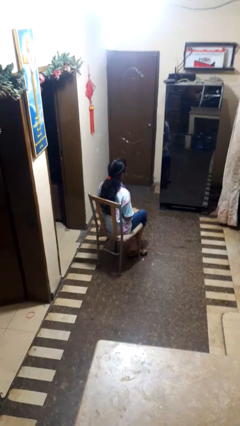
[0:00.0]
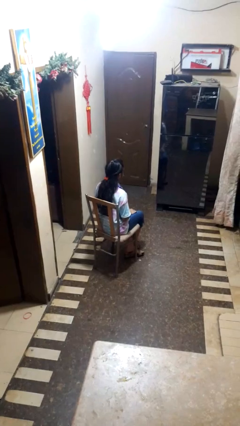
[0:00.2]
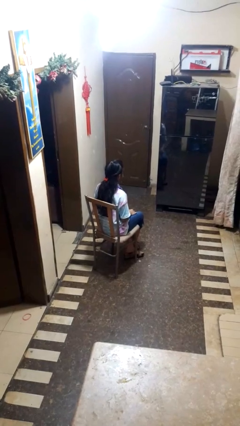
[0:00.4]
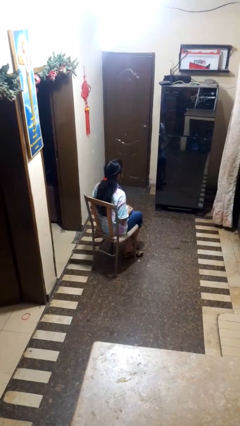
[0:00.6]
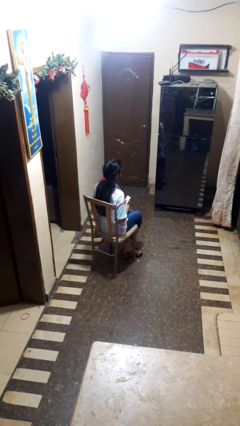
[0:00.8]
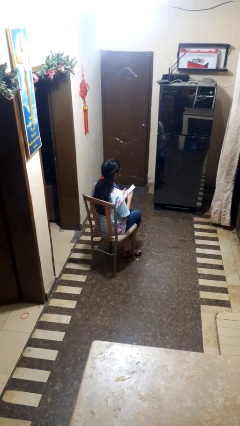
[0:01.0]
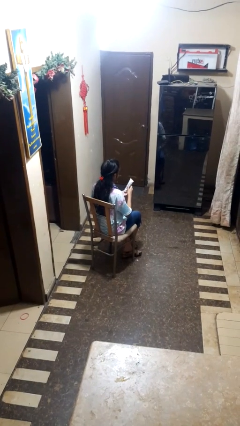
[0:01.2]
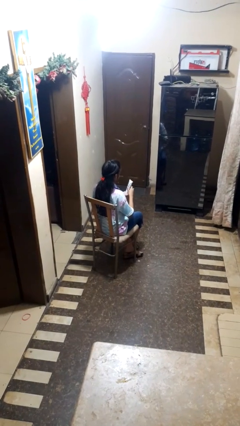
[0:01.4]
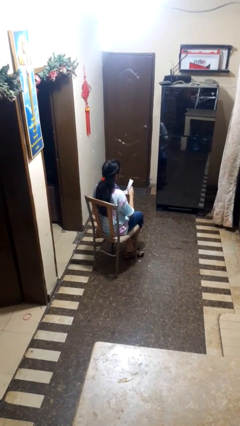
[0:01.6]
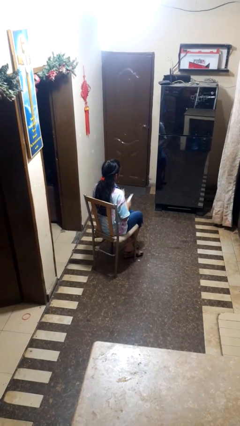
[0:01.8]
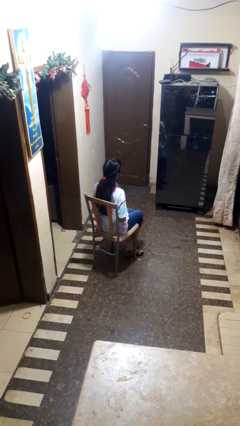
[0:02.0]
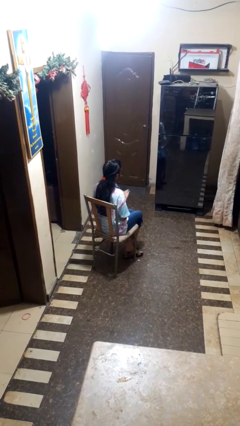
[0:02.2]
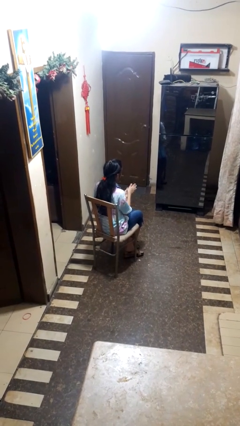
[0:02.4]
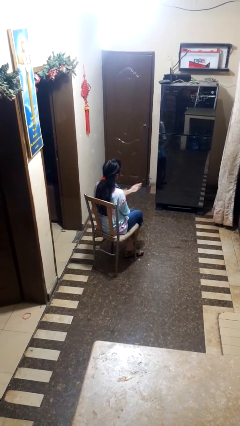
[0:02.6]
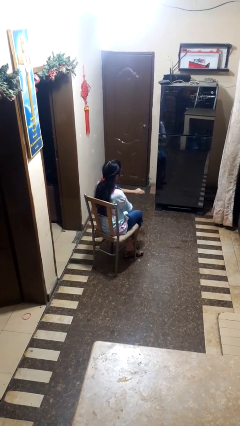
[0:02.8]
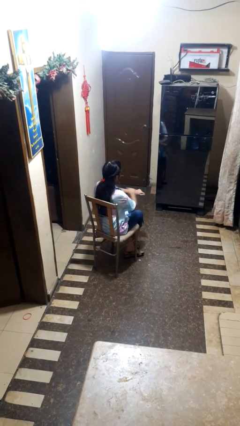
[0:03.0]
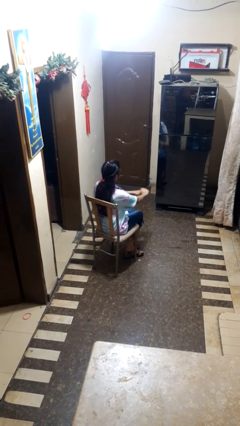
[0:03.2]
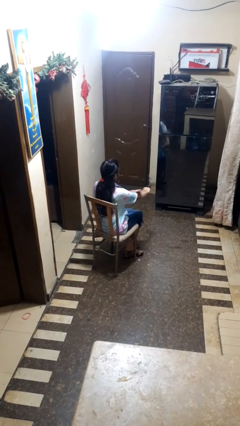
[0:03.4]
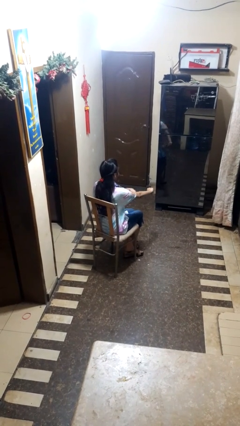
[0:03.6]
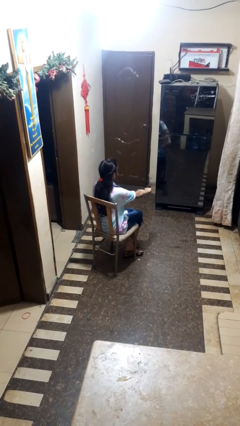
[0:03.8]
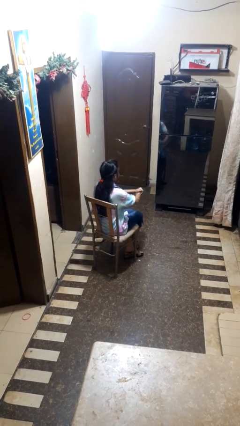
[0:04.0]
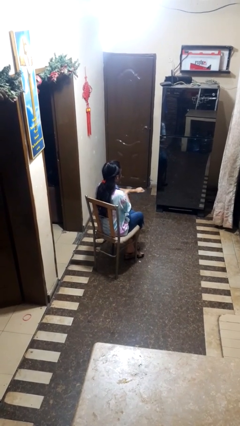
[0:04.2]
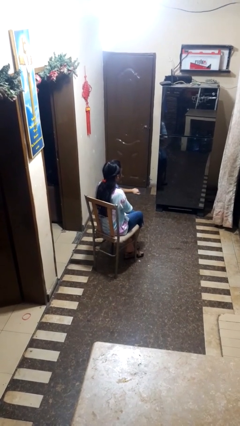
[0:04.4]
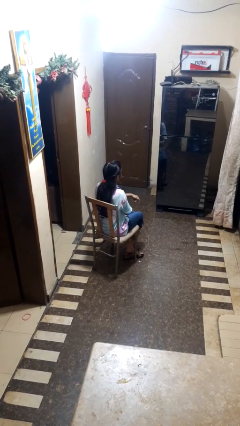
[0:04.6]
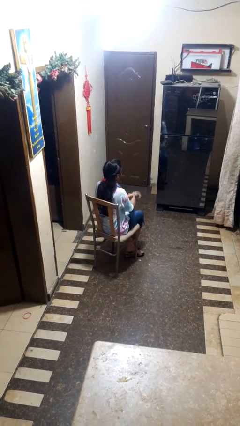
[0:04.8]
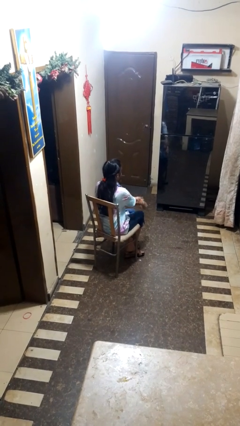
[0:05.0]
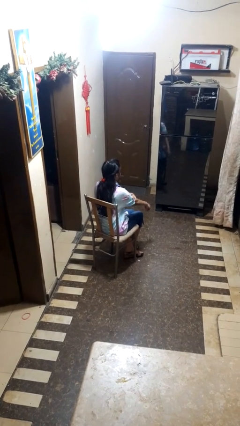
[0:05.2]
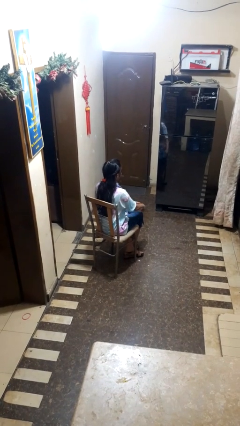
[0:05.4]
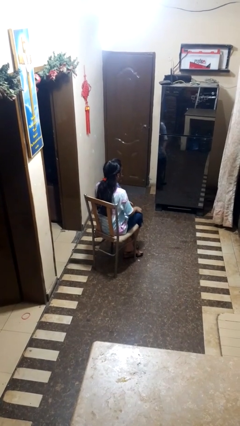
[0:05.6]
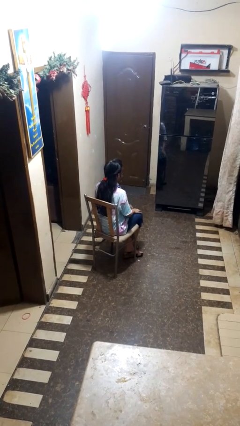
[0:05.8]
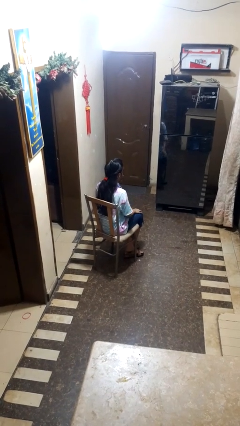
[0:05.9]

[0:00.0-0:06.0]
person applies sunscreen

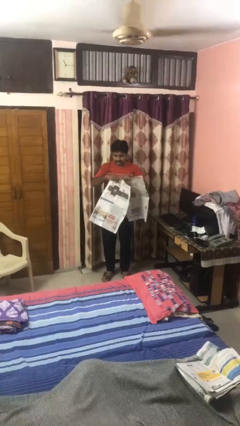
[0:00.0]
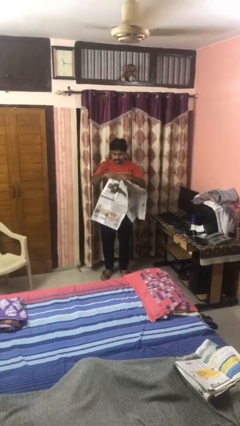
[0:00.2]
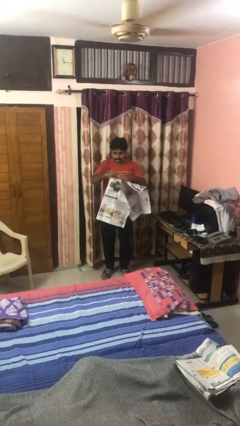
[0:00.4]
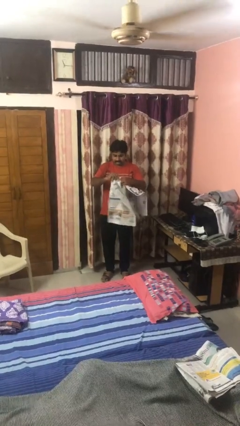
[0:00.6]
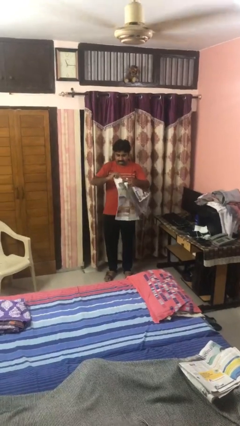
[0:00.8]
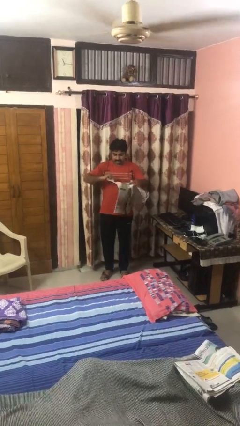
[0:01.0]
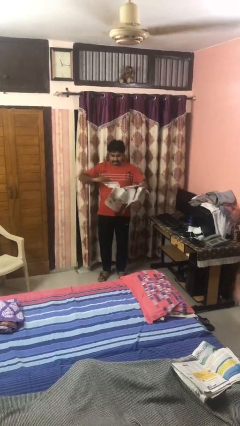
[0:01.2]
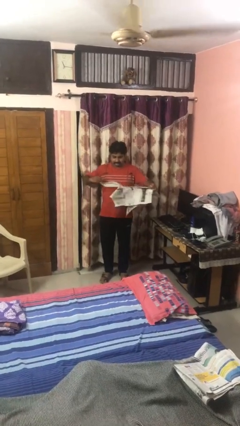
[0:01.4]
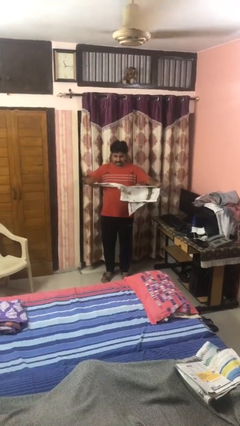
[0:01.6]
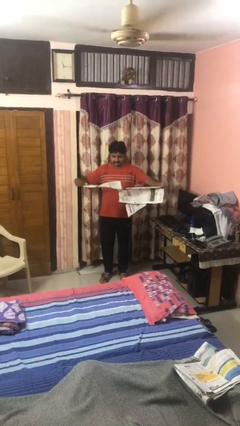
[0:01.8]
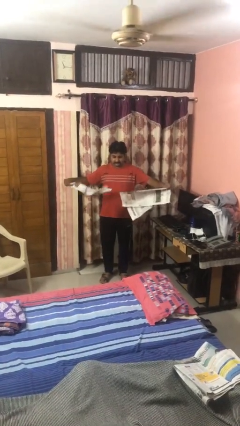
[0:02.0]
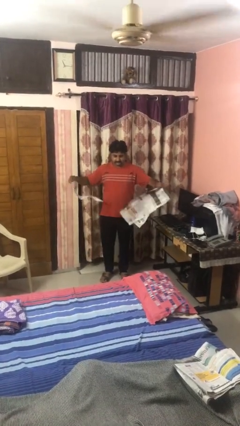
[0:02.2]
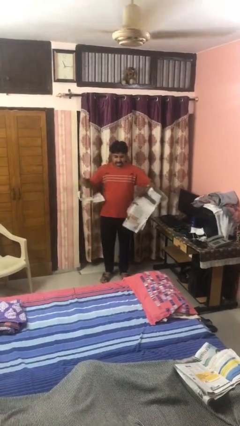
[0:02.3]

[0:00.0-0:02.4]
person tears paper

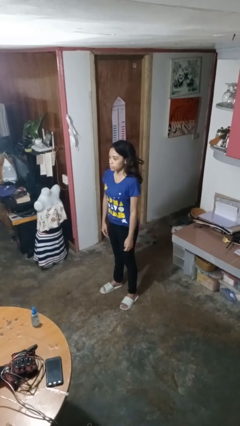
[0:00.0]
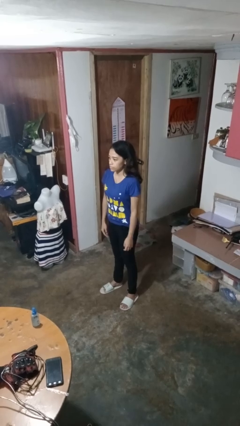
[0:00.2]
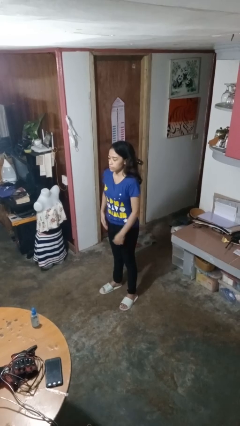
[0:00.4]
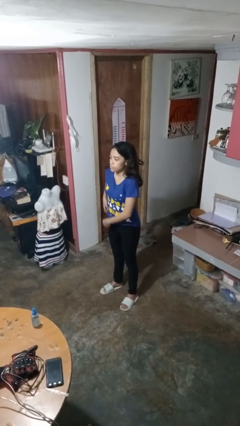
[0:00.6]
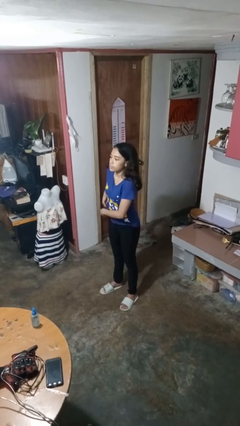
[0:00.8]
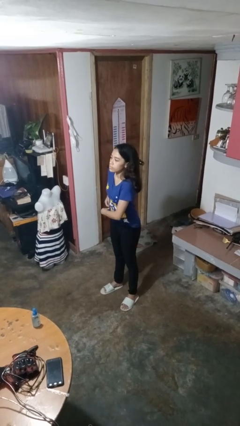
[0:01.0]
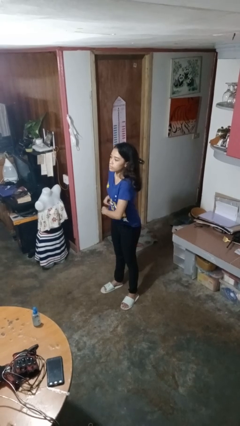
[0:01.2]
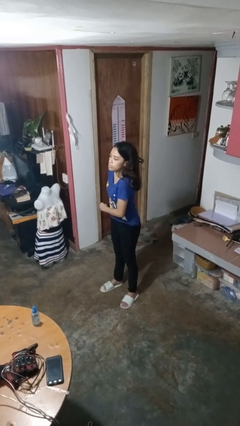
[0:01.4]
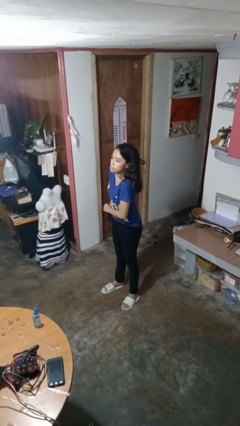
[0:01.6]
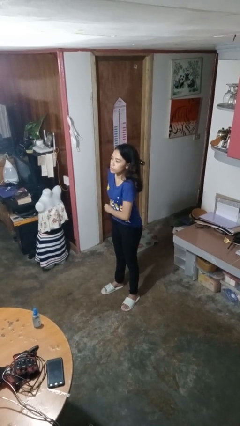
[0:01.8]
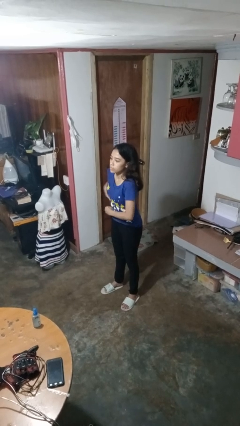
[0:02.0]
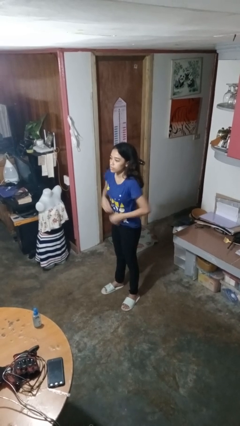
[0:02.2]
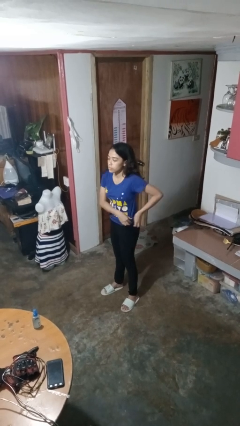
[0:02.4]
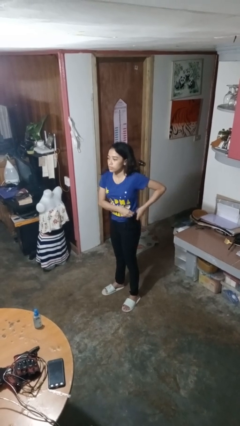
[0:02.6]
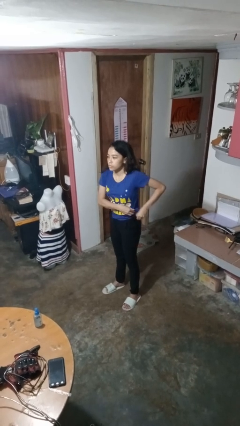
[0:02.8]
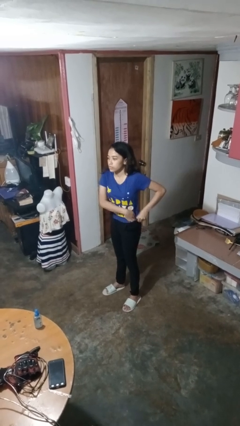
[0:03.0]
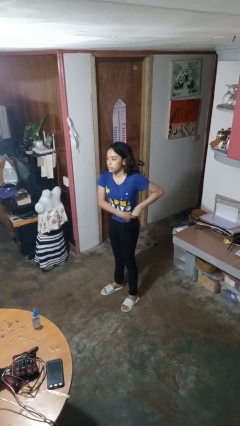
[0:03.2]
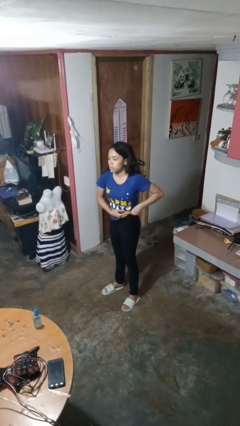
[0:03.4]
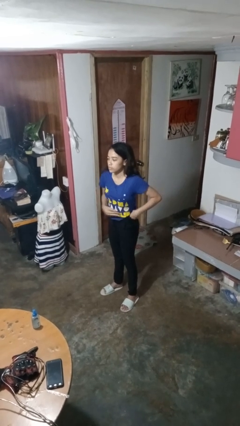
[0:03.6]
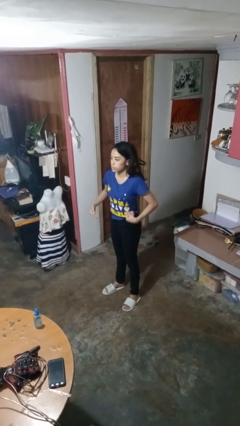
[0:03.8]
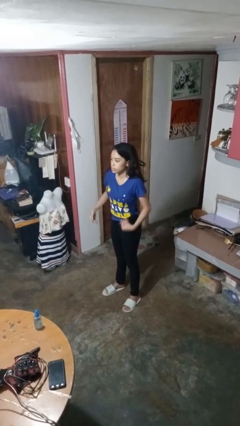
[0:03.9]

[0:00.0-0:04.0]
person tucks in shirt

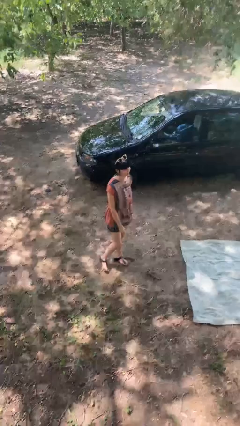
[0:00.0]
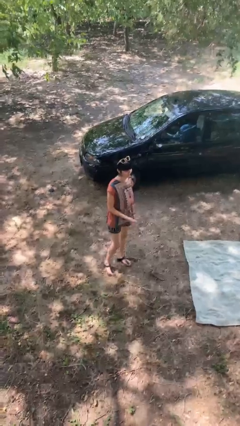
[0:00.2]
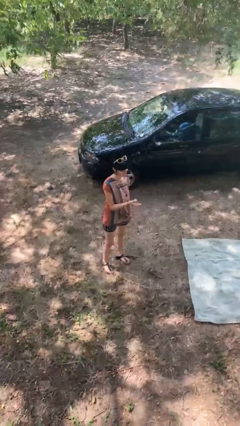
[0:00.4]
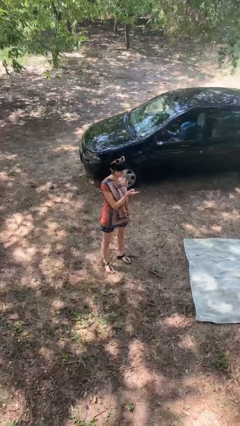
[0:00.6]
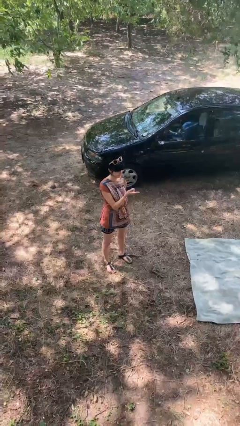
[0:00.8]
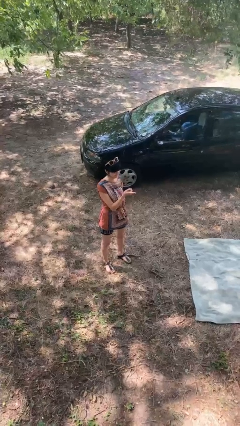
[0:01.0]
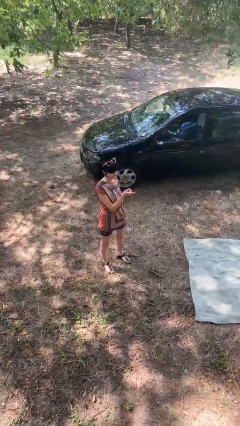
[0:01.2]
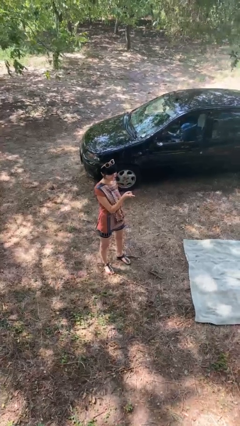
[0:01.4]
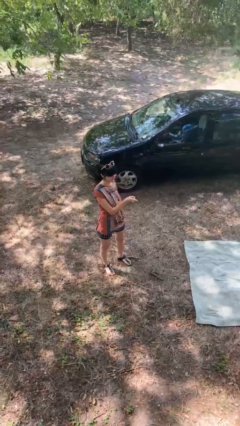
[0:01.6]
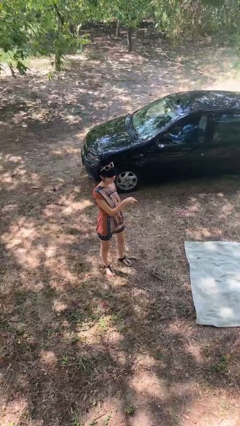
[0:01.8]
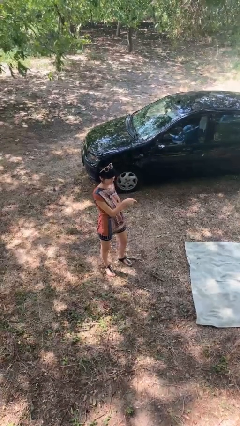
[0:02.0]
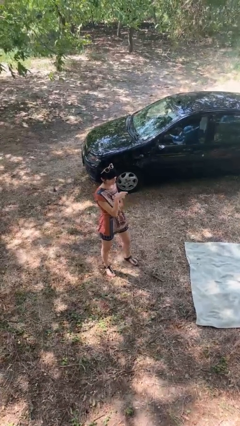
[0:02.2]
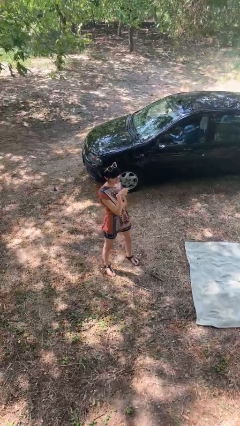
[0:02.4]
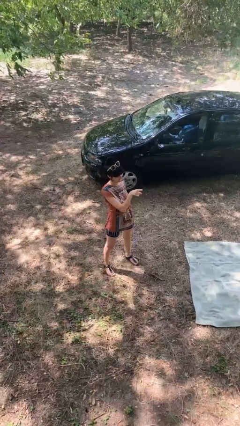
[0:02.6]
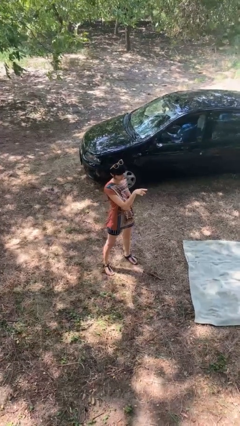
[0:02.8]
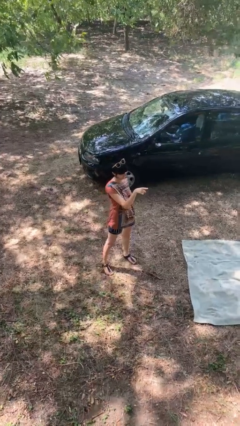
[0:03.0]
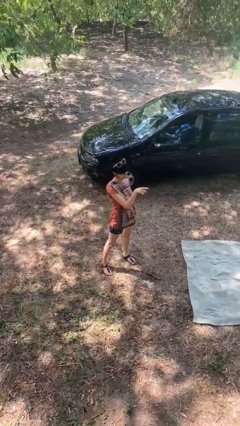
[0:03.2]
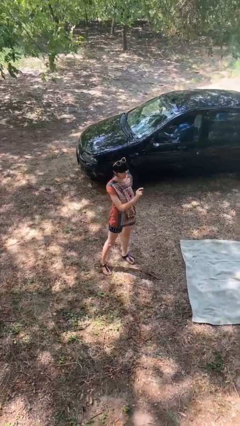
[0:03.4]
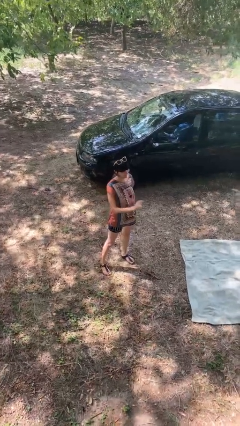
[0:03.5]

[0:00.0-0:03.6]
person points at person

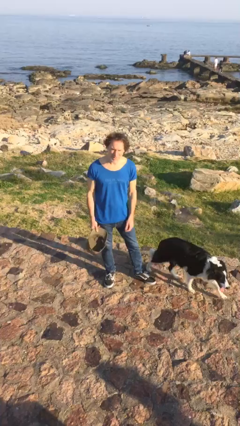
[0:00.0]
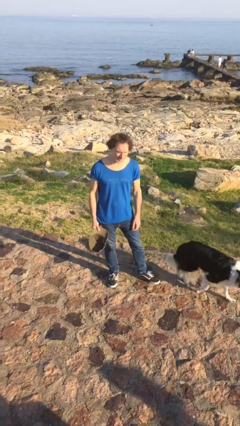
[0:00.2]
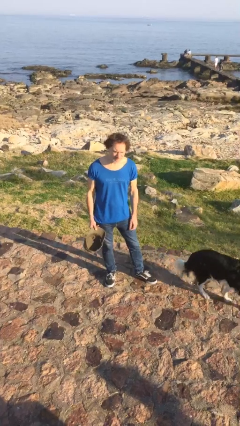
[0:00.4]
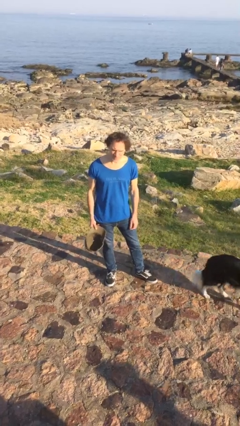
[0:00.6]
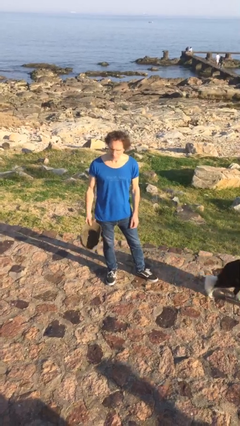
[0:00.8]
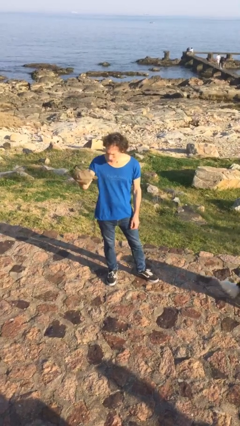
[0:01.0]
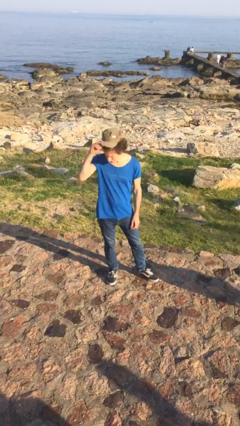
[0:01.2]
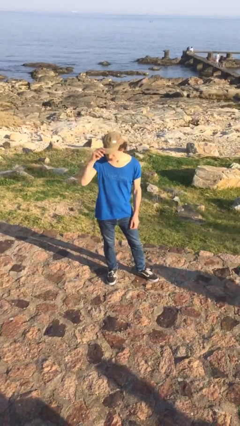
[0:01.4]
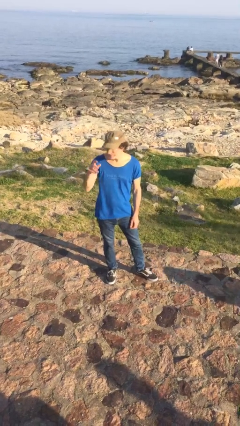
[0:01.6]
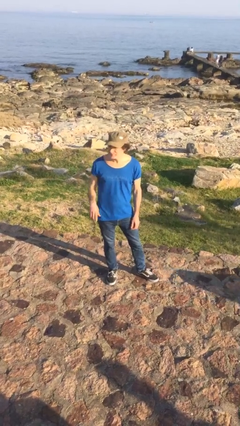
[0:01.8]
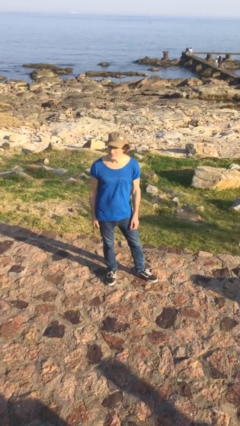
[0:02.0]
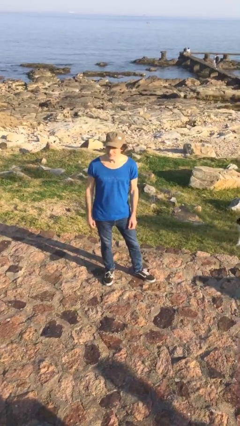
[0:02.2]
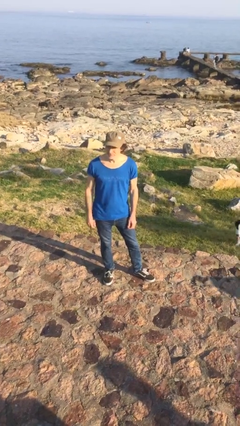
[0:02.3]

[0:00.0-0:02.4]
person puts on hat
